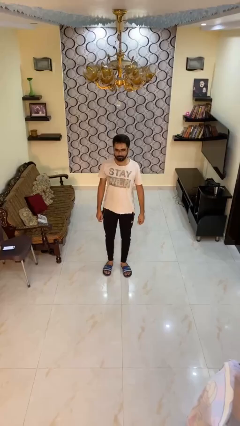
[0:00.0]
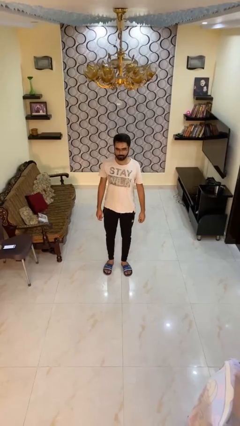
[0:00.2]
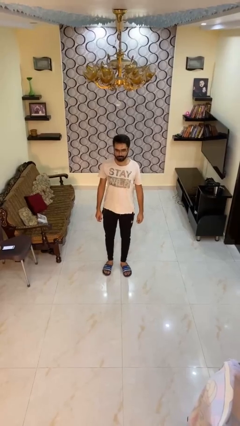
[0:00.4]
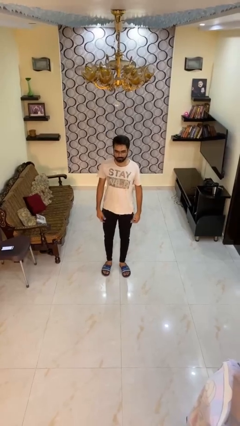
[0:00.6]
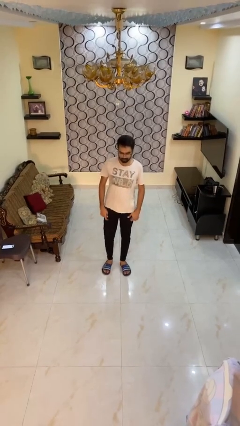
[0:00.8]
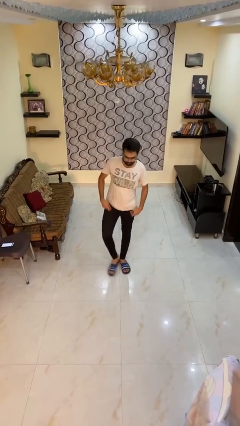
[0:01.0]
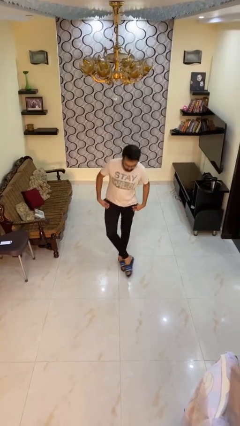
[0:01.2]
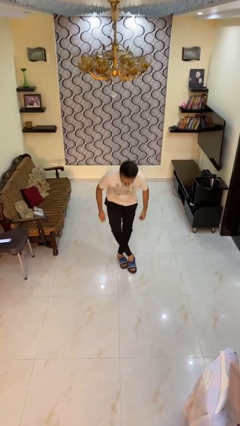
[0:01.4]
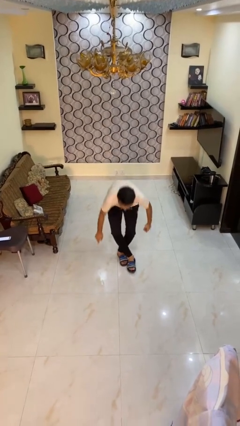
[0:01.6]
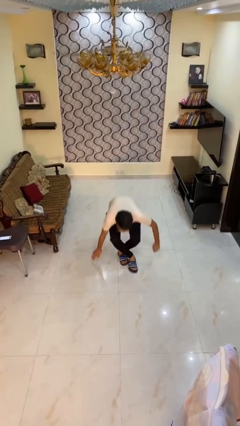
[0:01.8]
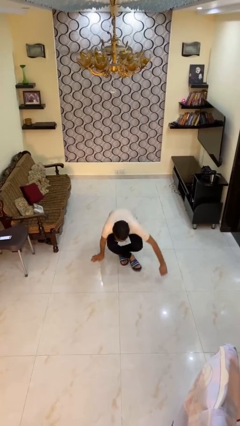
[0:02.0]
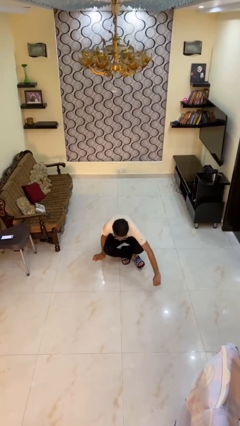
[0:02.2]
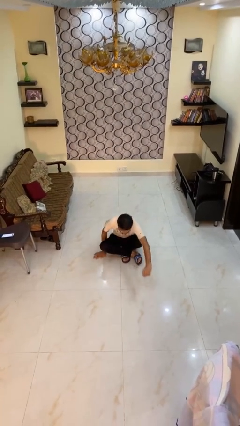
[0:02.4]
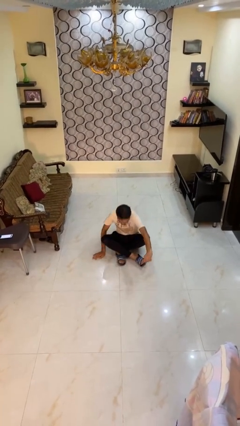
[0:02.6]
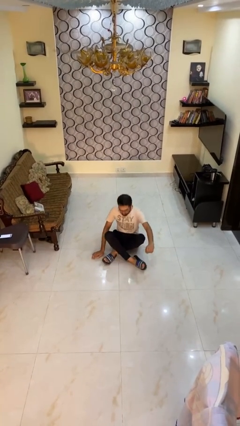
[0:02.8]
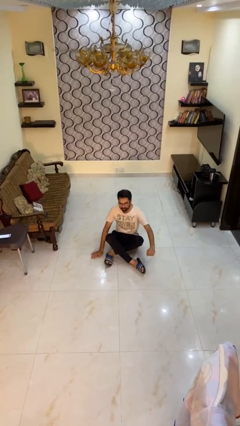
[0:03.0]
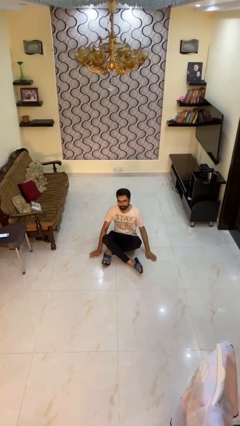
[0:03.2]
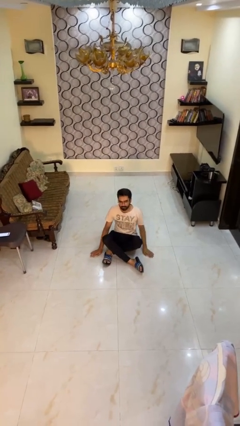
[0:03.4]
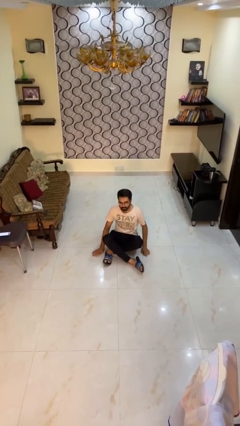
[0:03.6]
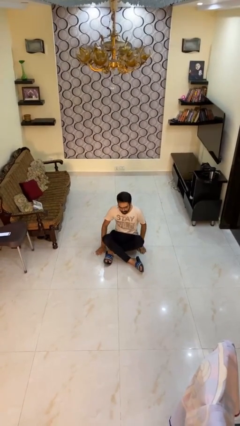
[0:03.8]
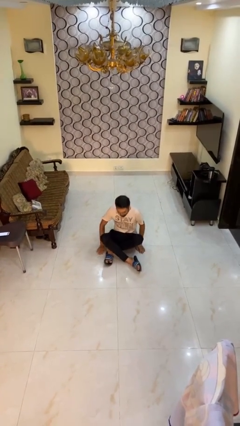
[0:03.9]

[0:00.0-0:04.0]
person sits crisscross

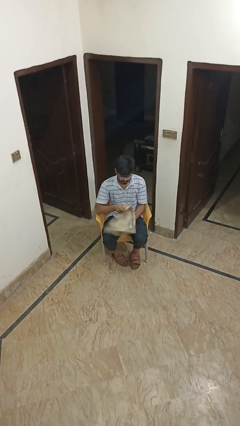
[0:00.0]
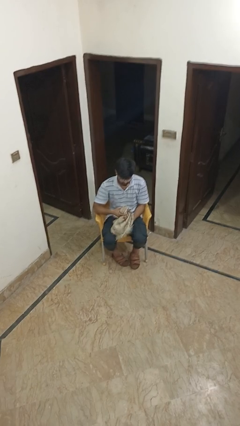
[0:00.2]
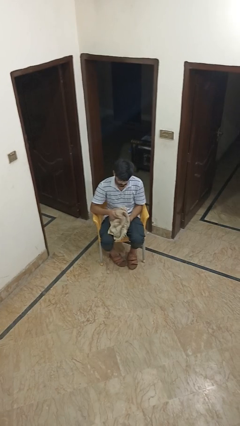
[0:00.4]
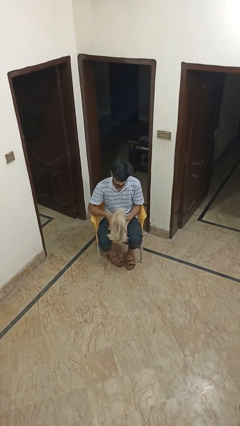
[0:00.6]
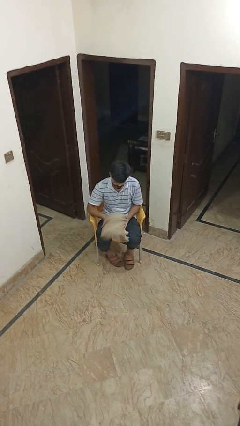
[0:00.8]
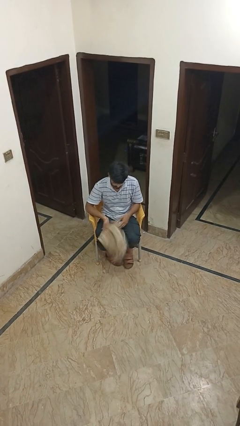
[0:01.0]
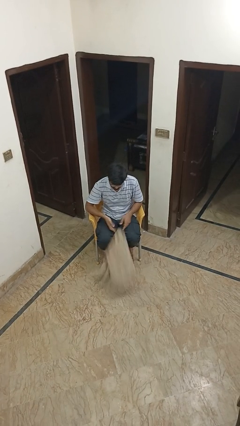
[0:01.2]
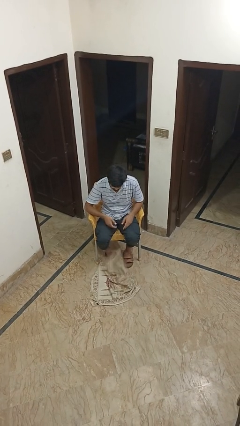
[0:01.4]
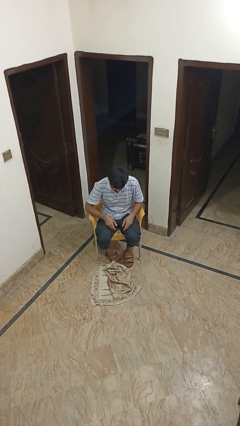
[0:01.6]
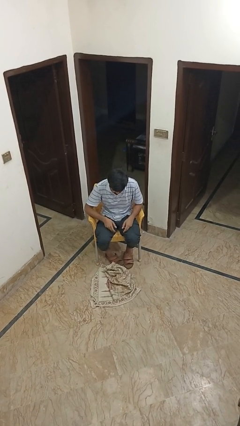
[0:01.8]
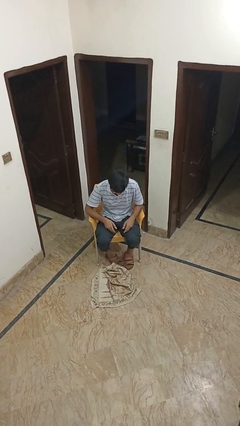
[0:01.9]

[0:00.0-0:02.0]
person drops object

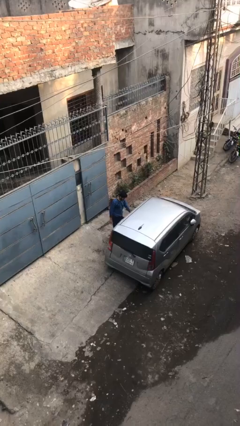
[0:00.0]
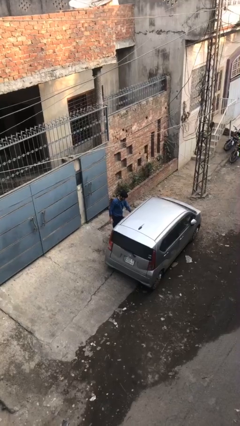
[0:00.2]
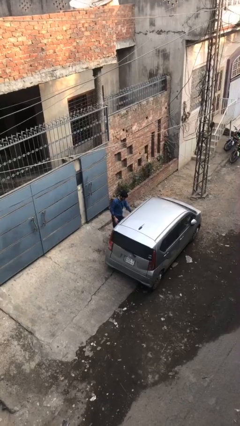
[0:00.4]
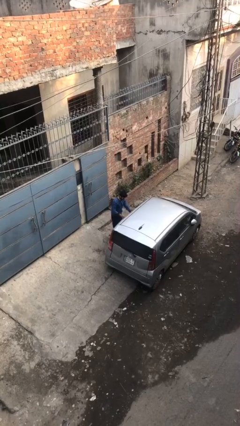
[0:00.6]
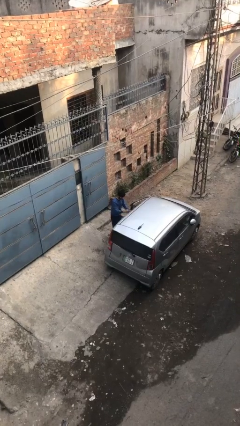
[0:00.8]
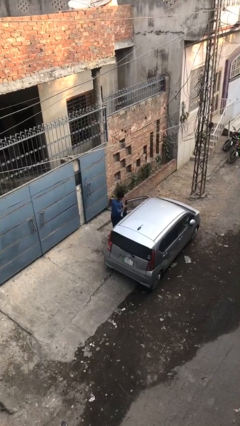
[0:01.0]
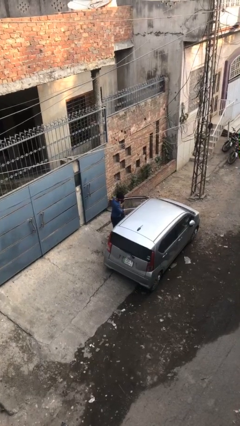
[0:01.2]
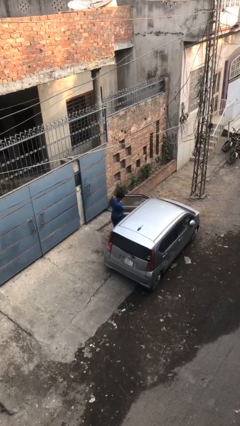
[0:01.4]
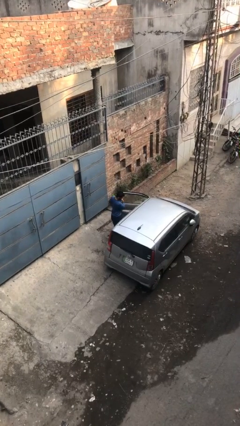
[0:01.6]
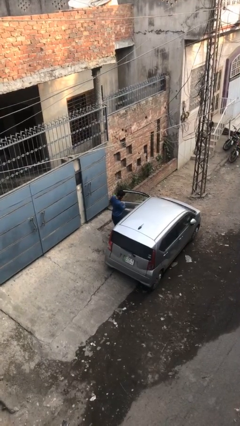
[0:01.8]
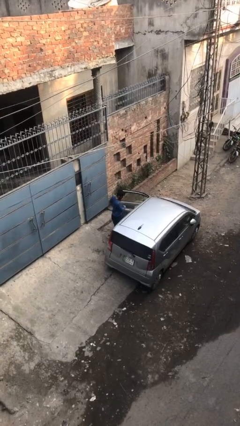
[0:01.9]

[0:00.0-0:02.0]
person opens car door

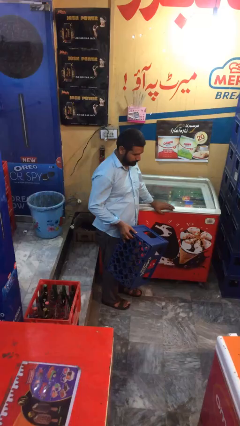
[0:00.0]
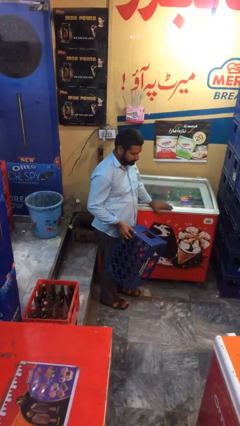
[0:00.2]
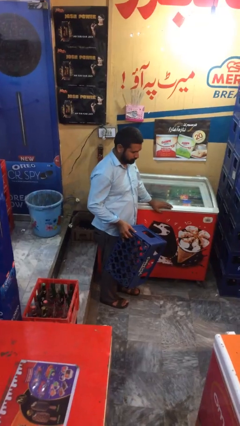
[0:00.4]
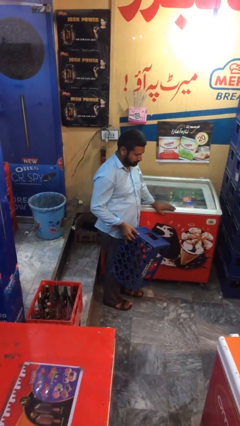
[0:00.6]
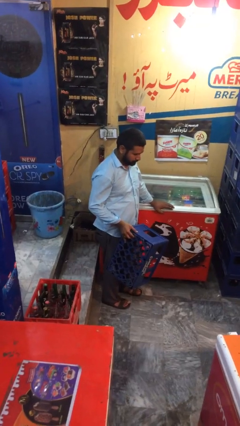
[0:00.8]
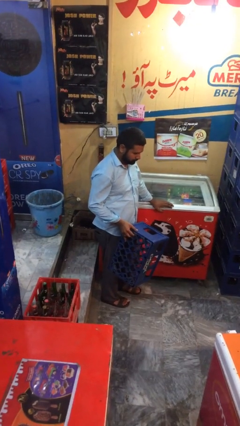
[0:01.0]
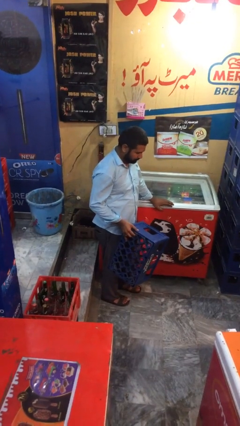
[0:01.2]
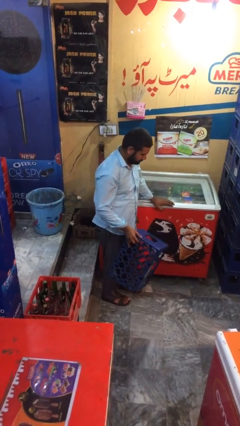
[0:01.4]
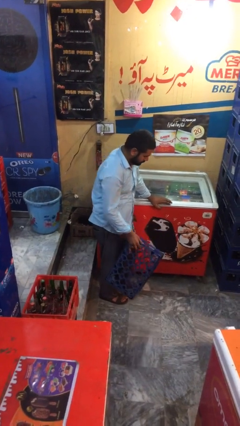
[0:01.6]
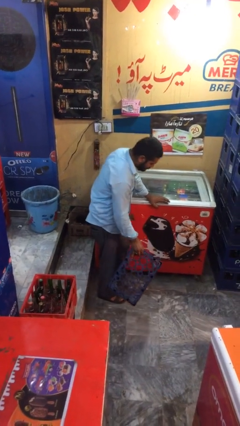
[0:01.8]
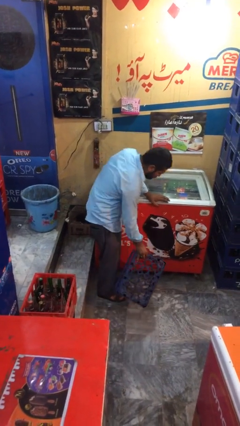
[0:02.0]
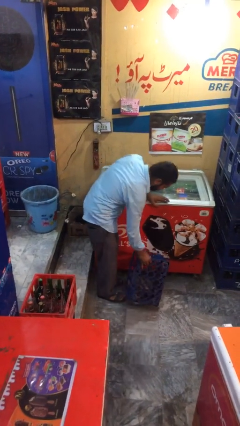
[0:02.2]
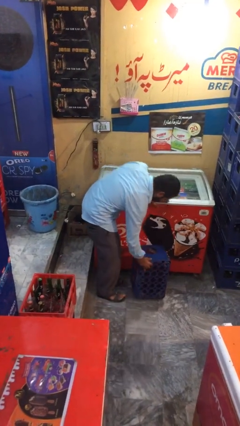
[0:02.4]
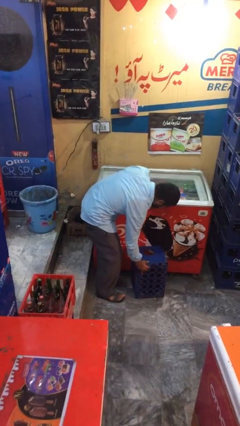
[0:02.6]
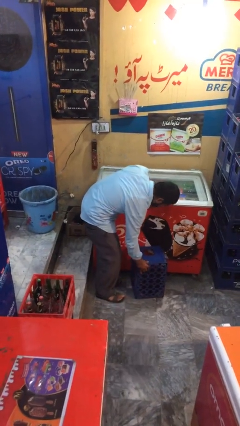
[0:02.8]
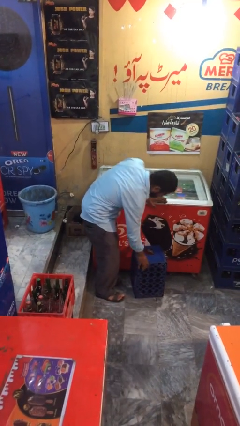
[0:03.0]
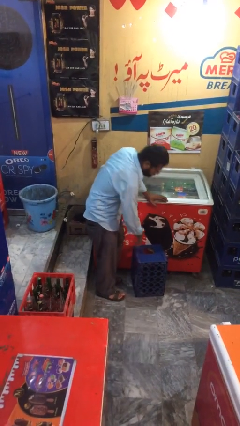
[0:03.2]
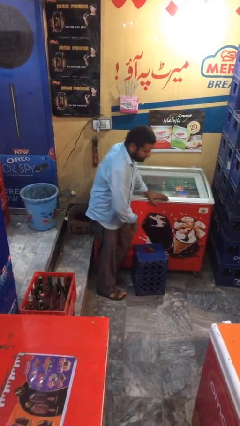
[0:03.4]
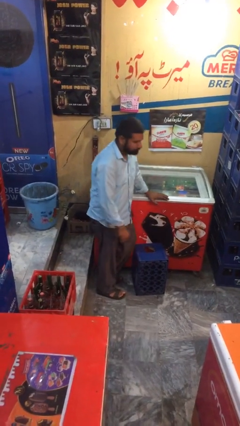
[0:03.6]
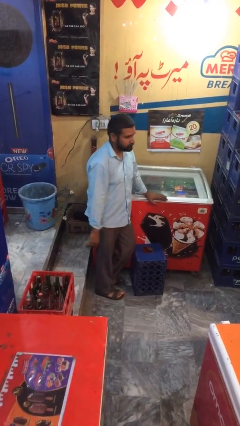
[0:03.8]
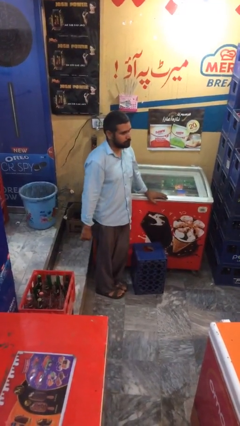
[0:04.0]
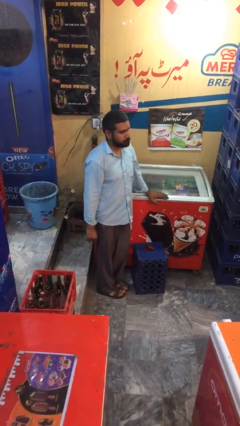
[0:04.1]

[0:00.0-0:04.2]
person puts down object on floor

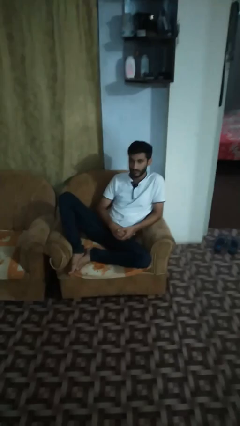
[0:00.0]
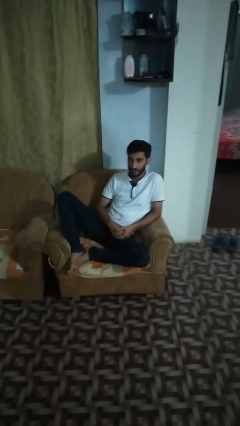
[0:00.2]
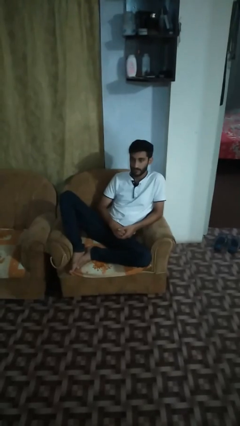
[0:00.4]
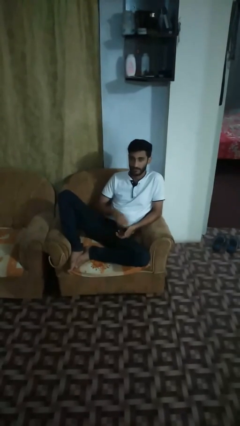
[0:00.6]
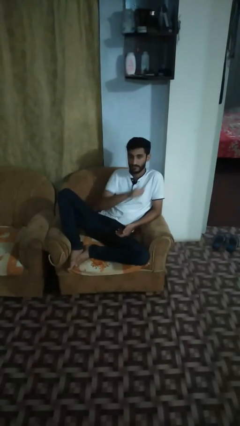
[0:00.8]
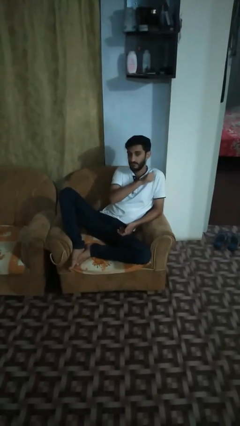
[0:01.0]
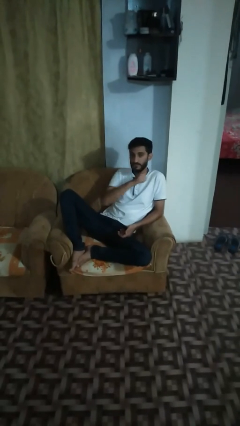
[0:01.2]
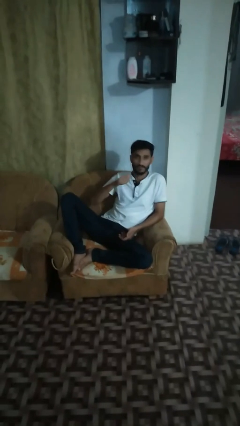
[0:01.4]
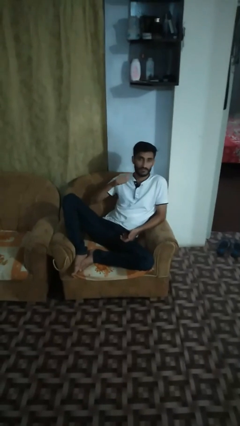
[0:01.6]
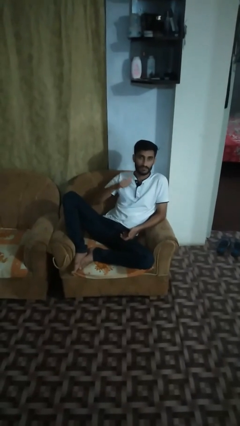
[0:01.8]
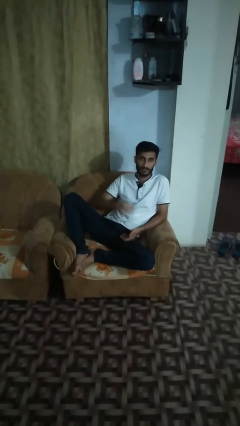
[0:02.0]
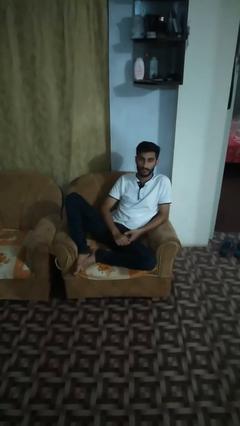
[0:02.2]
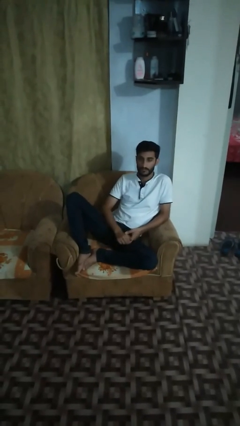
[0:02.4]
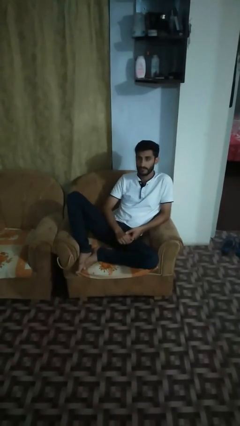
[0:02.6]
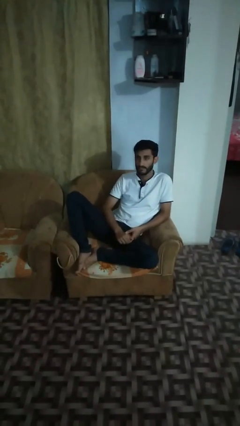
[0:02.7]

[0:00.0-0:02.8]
person gestures cut

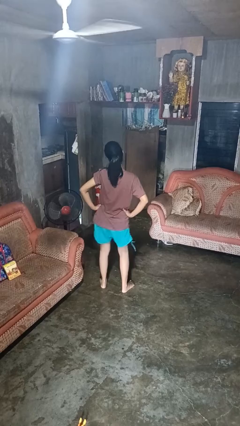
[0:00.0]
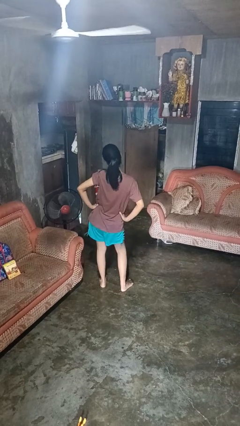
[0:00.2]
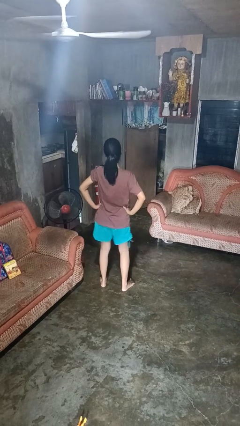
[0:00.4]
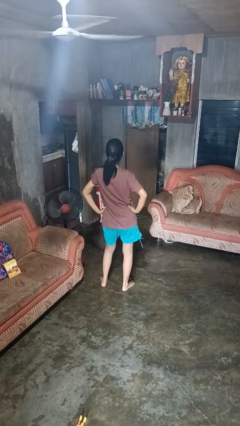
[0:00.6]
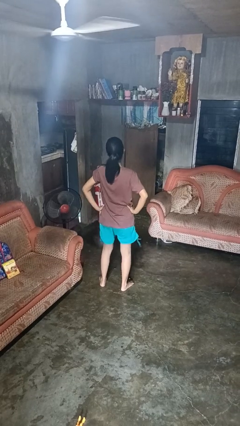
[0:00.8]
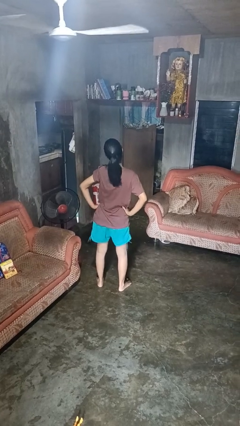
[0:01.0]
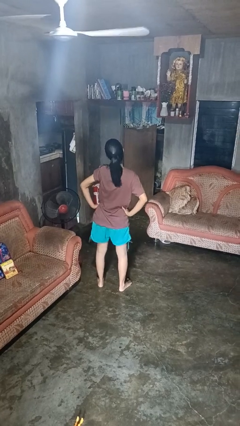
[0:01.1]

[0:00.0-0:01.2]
person dances in place

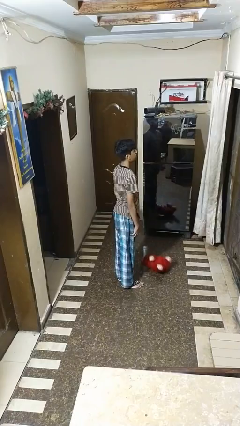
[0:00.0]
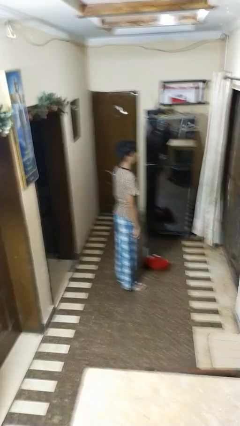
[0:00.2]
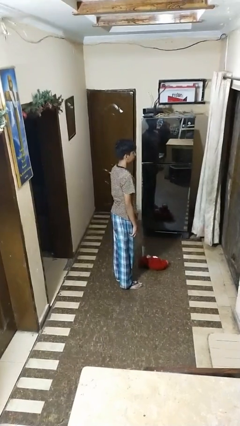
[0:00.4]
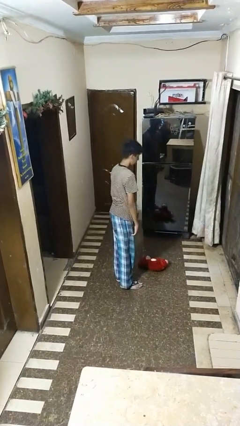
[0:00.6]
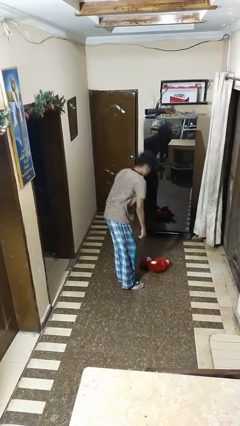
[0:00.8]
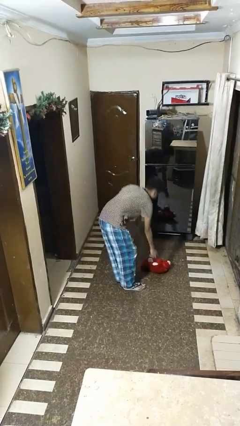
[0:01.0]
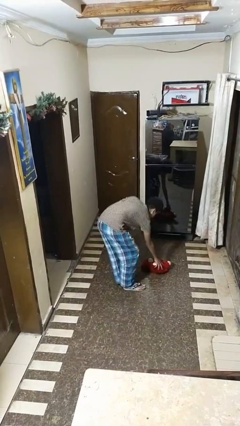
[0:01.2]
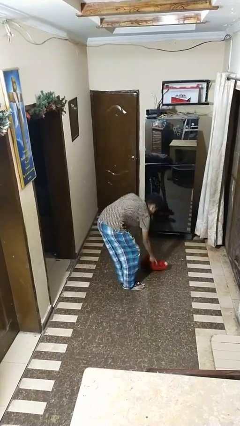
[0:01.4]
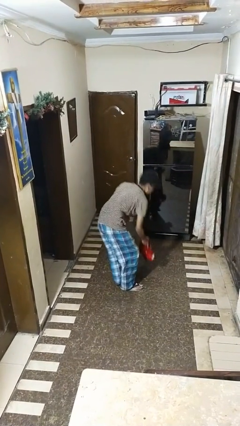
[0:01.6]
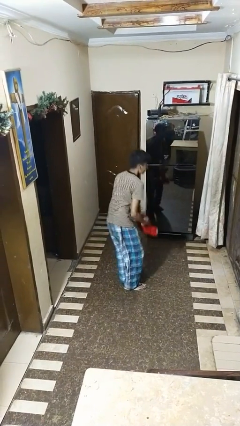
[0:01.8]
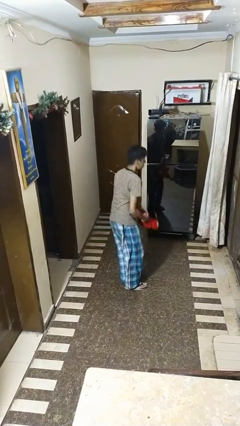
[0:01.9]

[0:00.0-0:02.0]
person picks up object from floor
